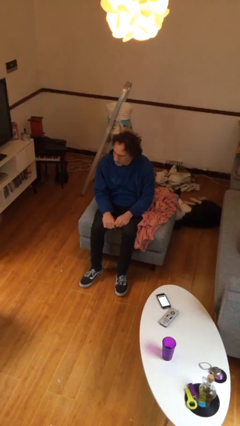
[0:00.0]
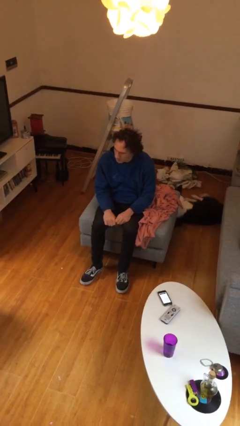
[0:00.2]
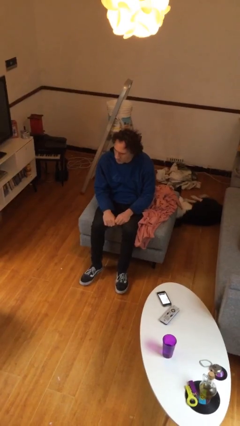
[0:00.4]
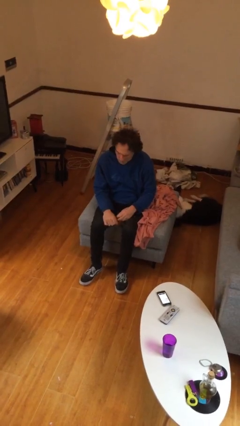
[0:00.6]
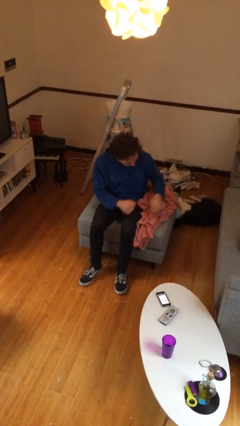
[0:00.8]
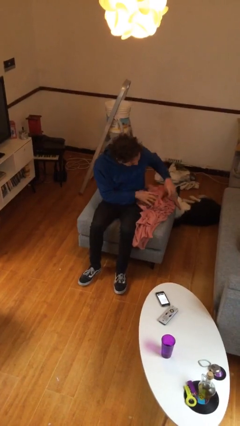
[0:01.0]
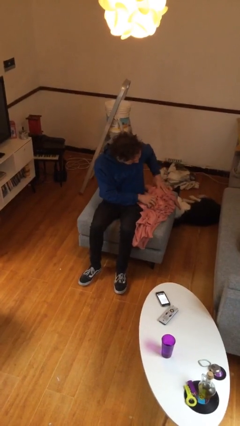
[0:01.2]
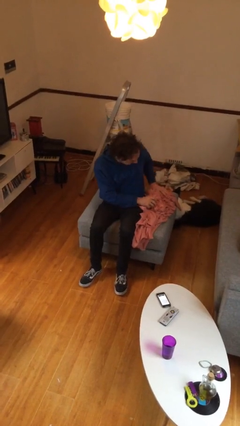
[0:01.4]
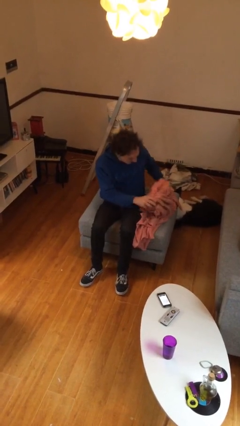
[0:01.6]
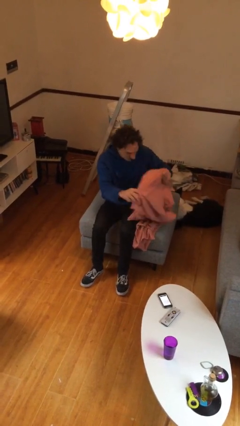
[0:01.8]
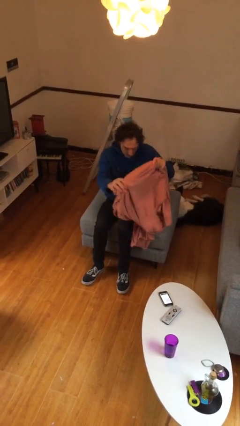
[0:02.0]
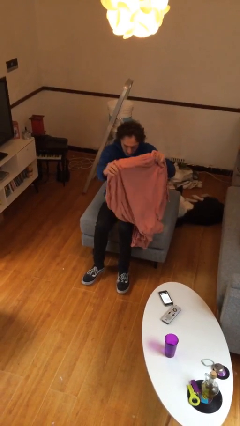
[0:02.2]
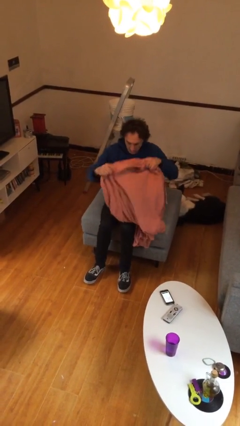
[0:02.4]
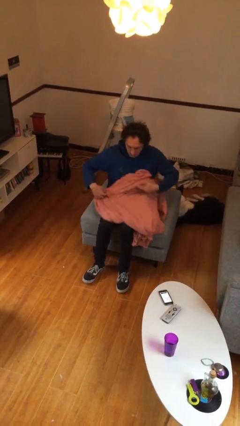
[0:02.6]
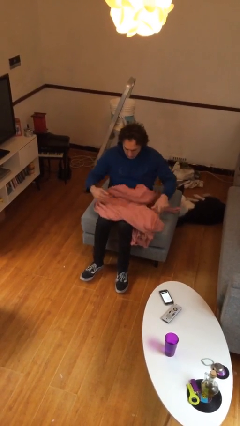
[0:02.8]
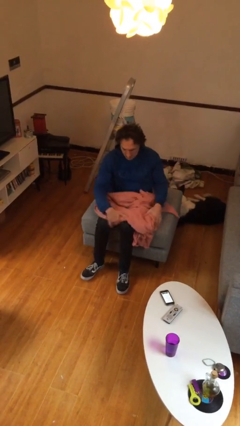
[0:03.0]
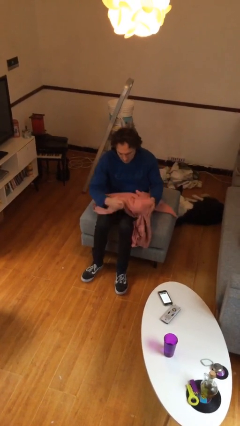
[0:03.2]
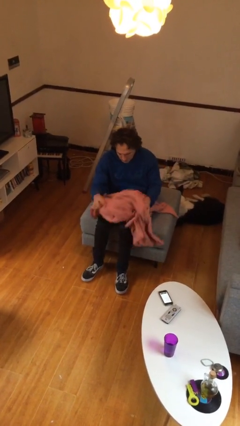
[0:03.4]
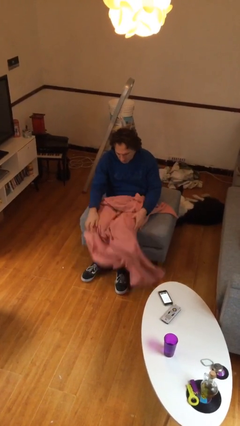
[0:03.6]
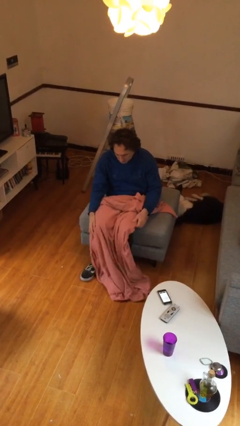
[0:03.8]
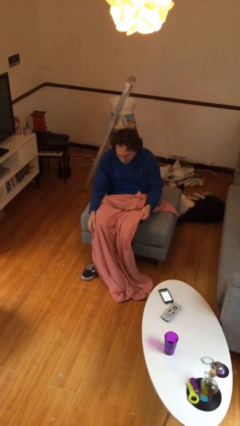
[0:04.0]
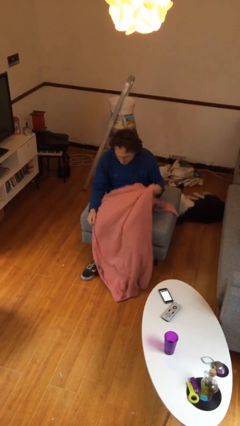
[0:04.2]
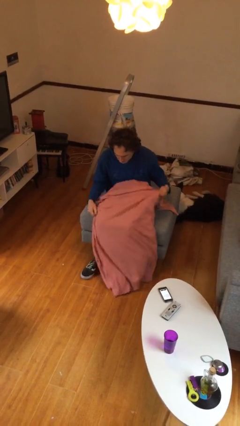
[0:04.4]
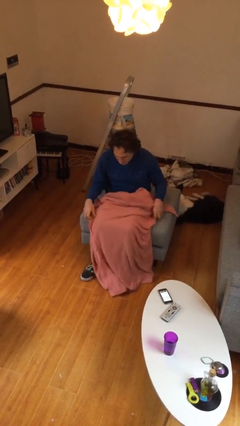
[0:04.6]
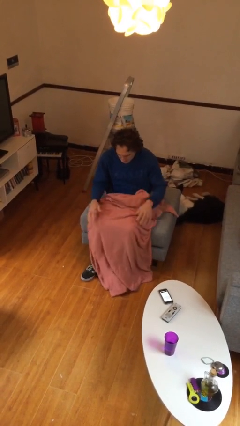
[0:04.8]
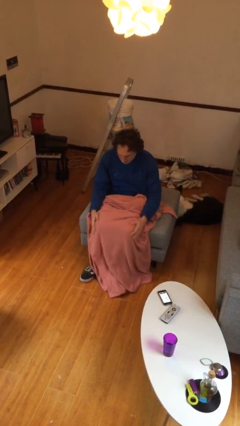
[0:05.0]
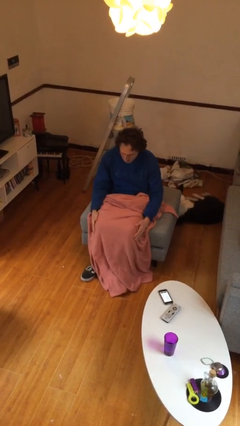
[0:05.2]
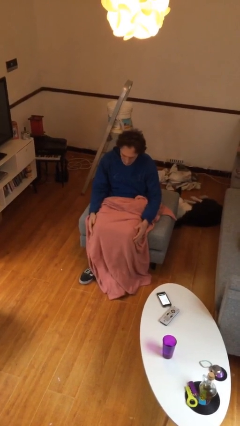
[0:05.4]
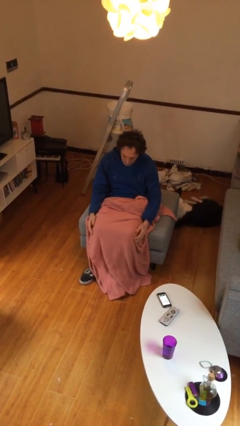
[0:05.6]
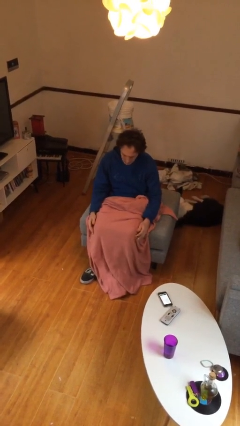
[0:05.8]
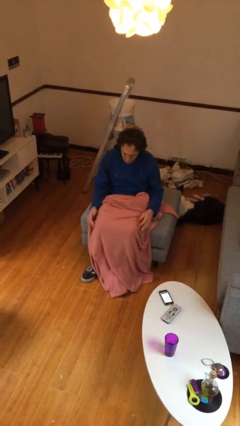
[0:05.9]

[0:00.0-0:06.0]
person covers with blanket

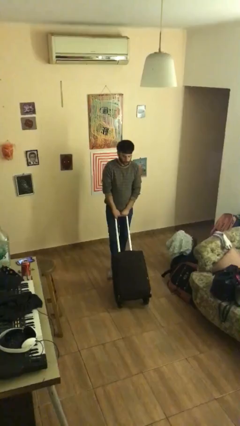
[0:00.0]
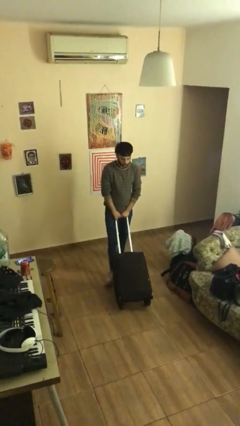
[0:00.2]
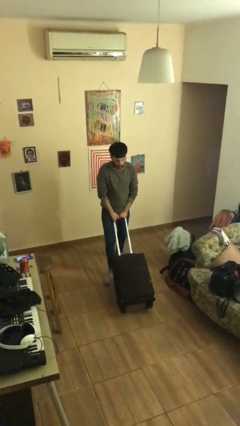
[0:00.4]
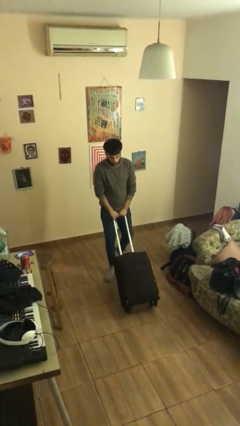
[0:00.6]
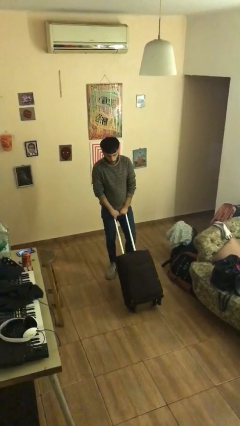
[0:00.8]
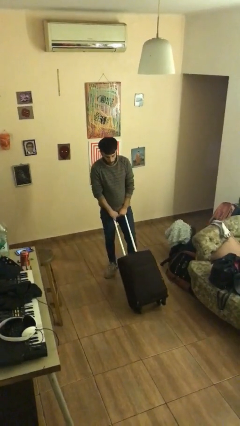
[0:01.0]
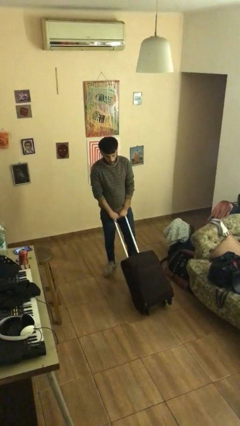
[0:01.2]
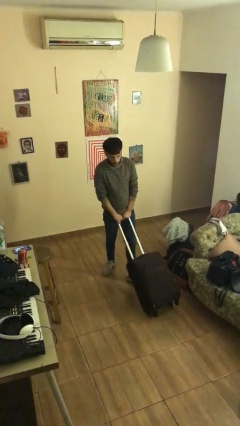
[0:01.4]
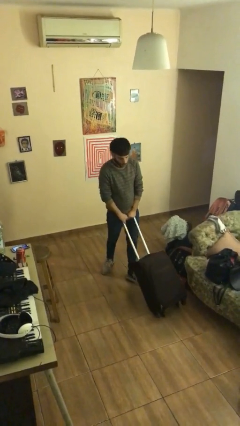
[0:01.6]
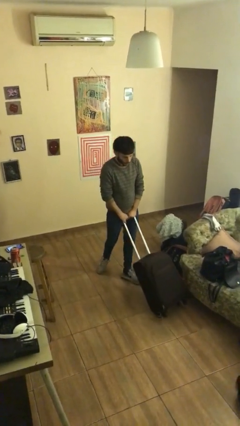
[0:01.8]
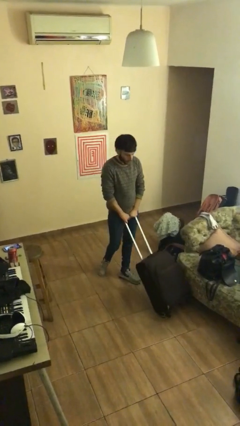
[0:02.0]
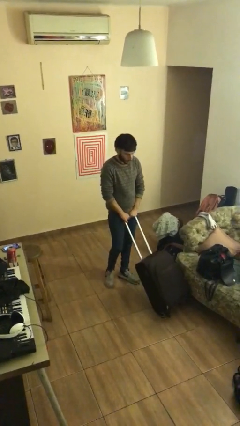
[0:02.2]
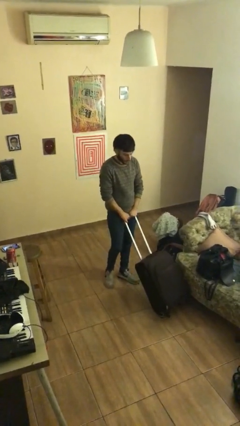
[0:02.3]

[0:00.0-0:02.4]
person pushes wheeled cart

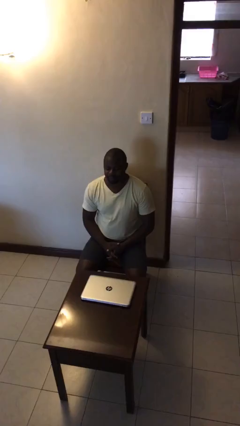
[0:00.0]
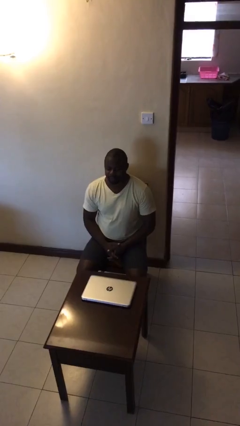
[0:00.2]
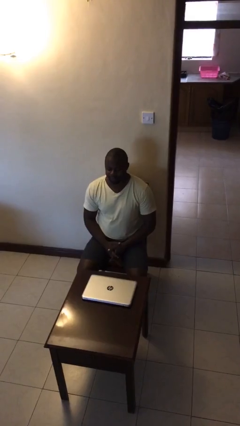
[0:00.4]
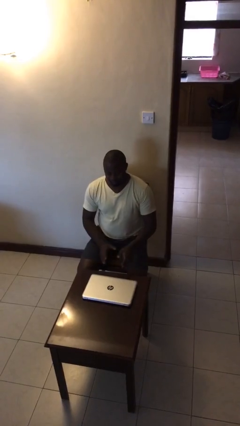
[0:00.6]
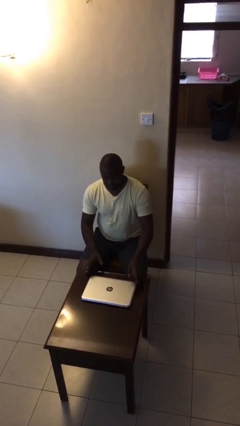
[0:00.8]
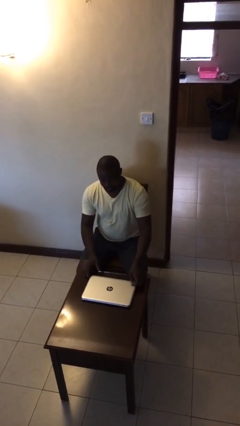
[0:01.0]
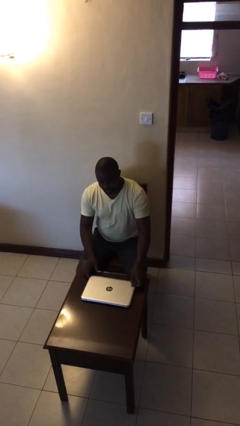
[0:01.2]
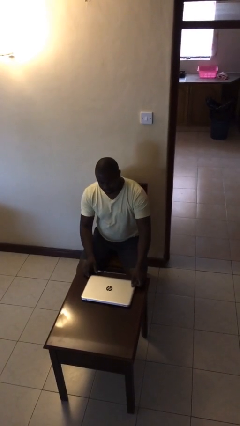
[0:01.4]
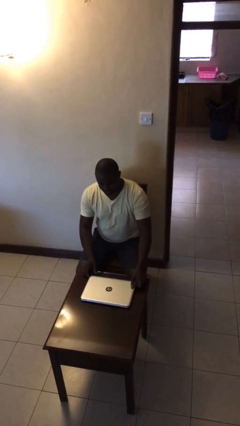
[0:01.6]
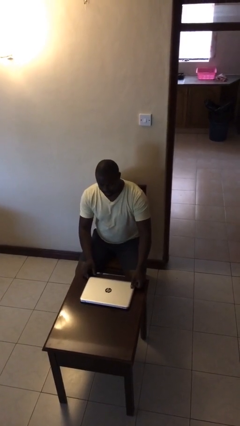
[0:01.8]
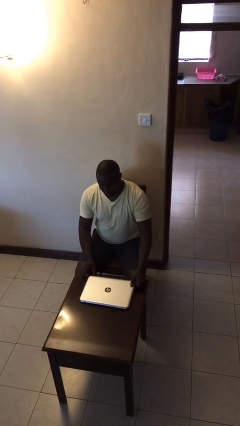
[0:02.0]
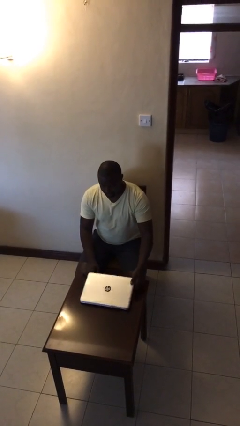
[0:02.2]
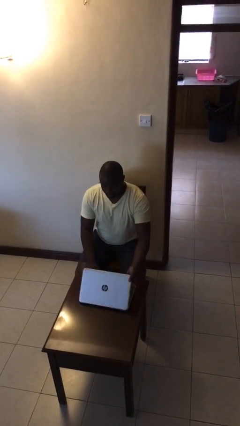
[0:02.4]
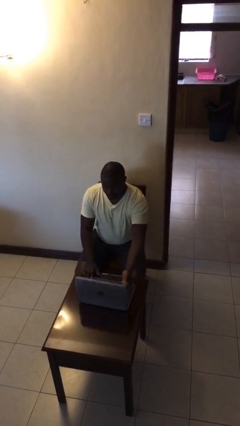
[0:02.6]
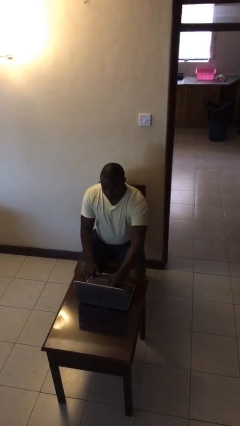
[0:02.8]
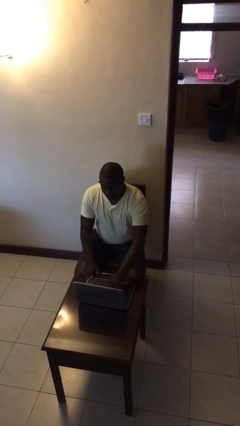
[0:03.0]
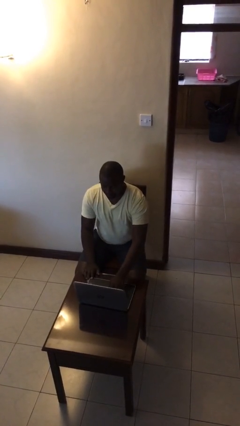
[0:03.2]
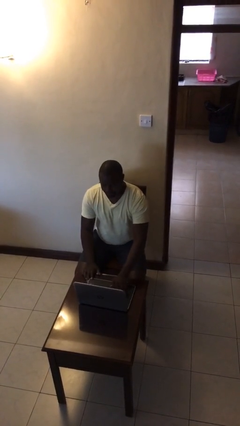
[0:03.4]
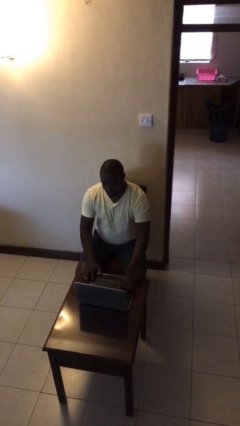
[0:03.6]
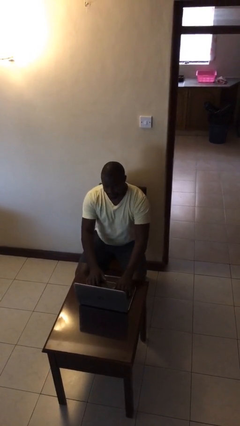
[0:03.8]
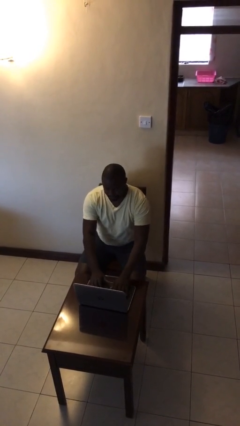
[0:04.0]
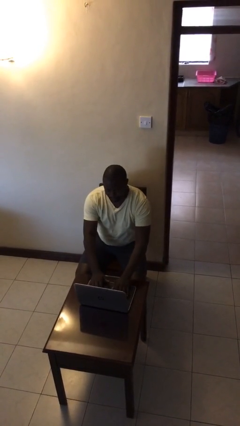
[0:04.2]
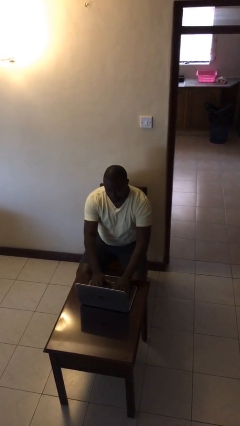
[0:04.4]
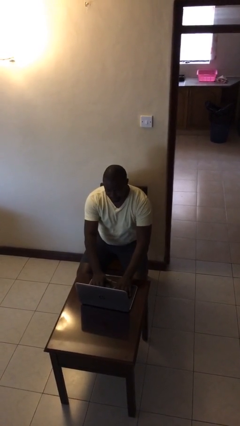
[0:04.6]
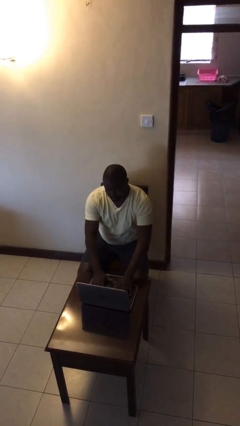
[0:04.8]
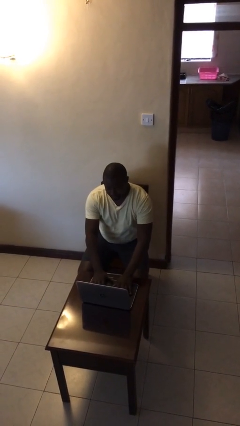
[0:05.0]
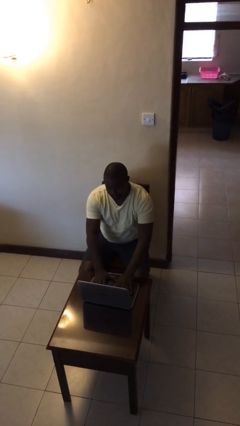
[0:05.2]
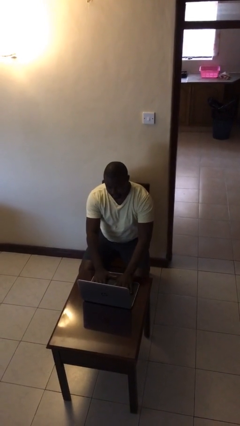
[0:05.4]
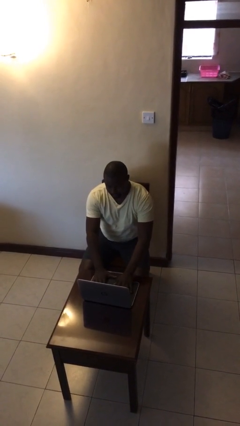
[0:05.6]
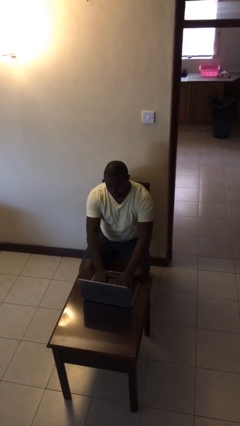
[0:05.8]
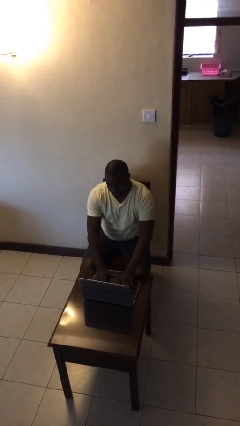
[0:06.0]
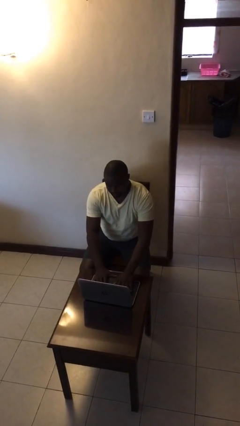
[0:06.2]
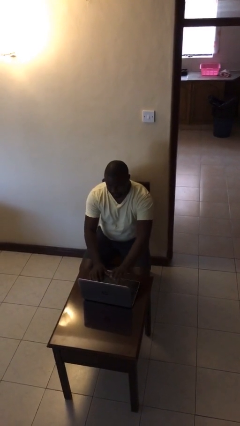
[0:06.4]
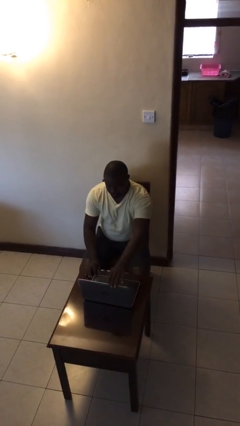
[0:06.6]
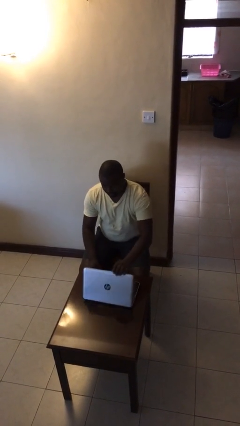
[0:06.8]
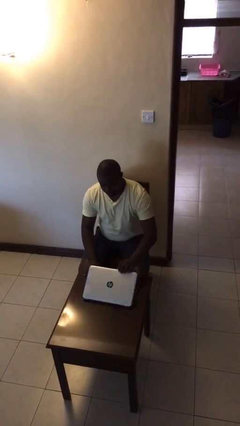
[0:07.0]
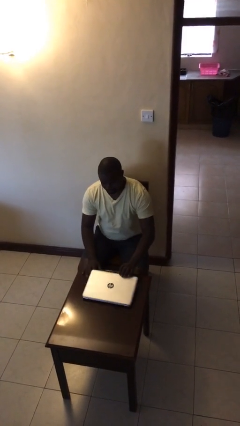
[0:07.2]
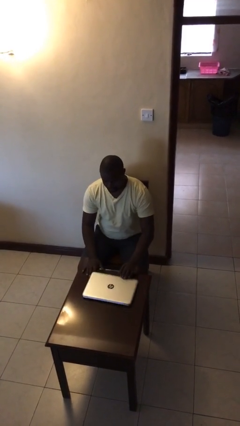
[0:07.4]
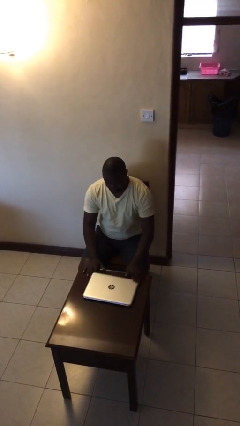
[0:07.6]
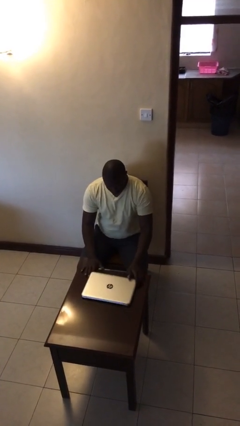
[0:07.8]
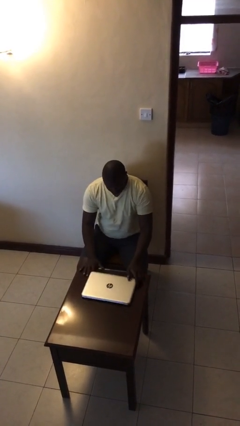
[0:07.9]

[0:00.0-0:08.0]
person interacts with laptop

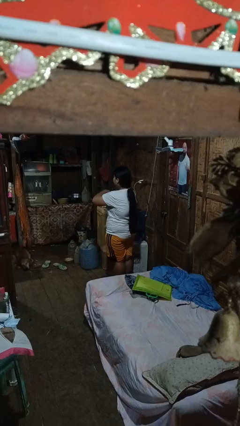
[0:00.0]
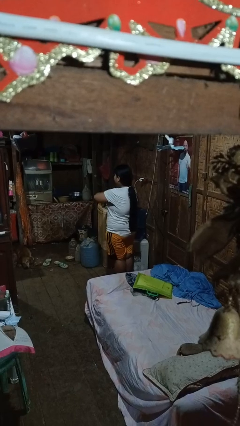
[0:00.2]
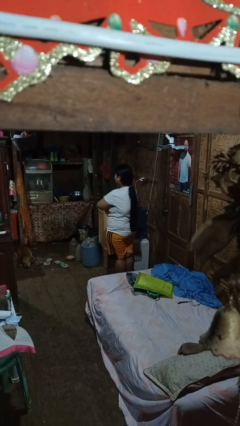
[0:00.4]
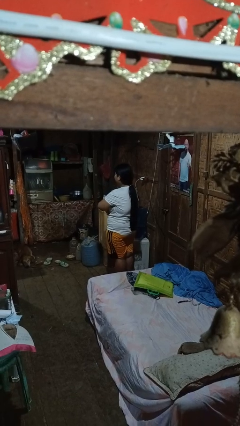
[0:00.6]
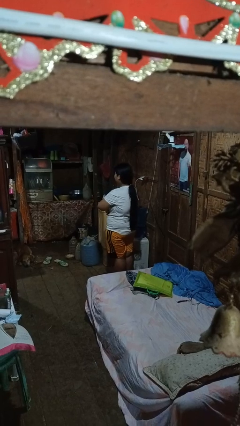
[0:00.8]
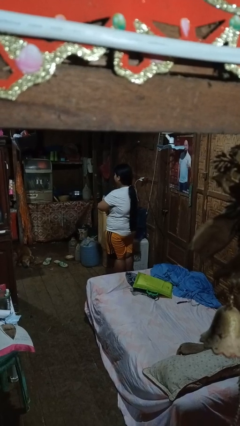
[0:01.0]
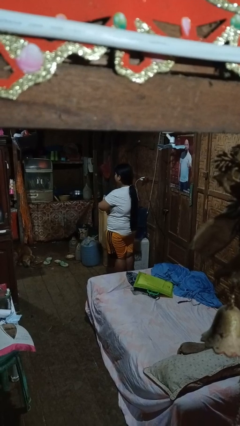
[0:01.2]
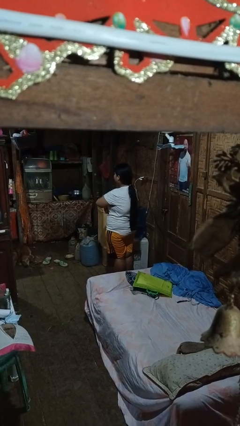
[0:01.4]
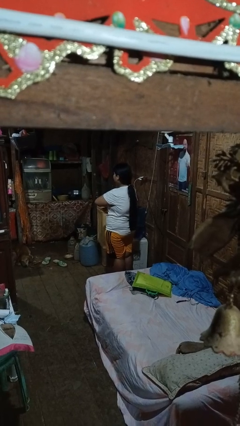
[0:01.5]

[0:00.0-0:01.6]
person gestures arms x
